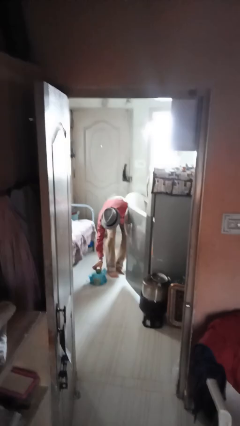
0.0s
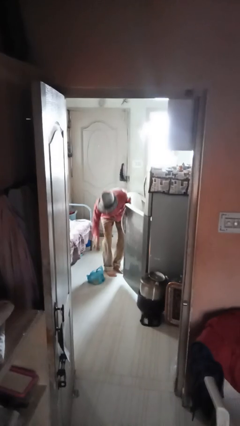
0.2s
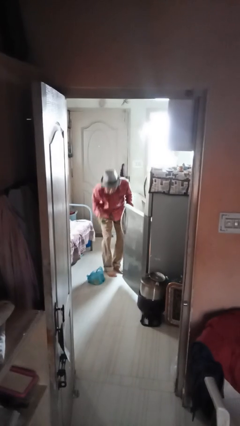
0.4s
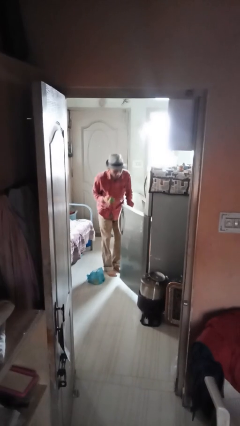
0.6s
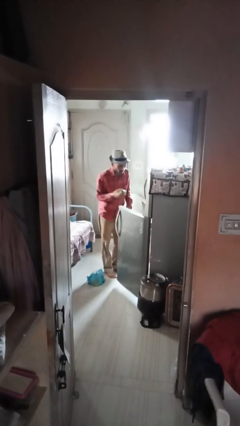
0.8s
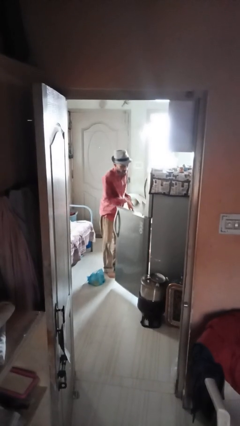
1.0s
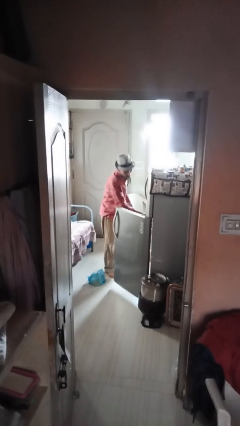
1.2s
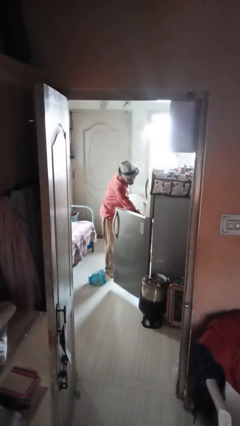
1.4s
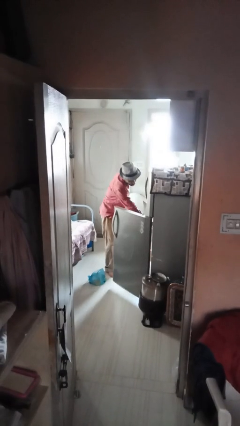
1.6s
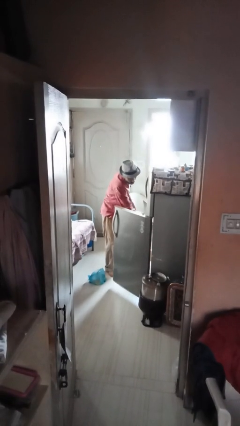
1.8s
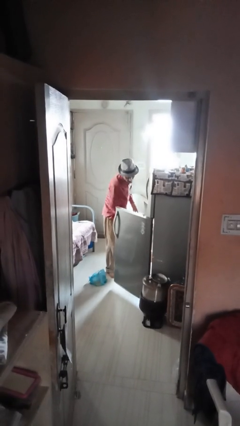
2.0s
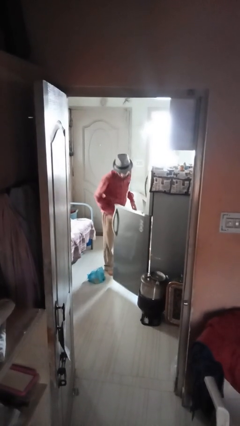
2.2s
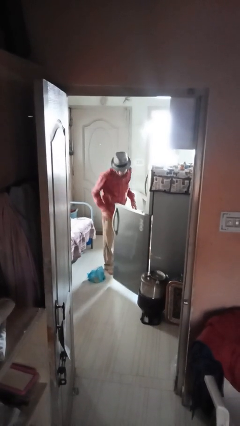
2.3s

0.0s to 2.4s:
person loads groceries into refrigerator

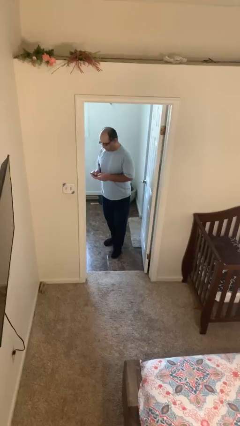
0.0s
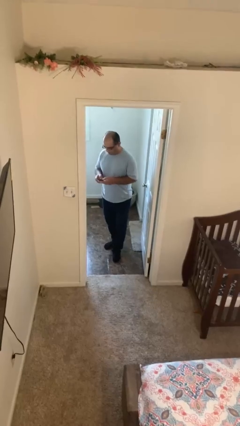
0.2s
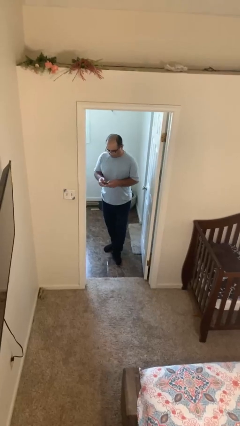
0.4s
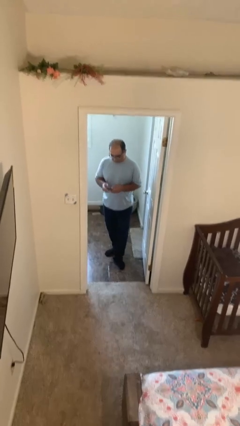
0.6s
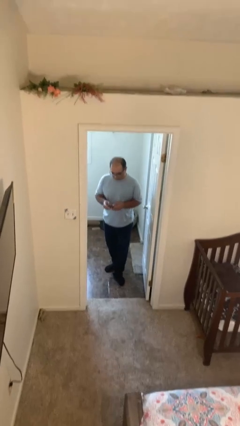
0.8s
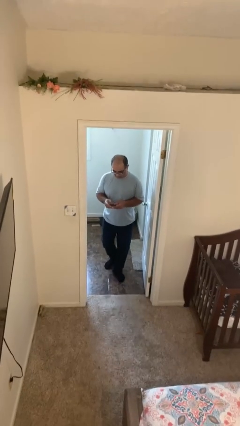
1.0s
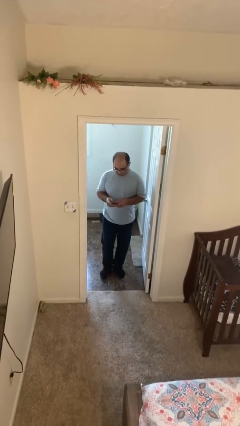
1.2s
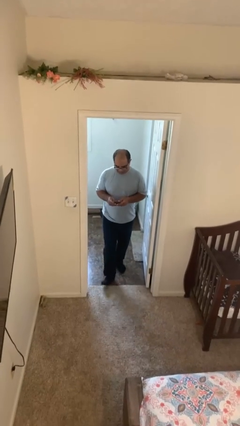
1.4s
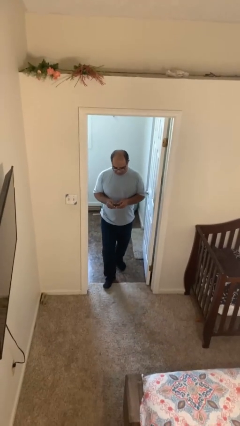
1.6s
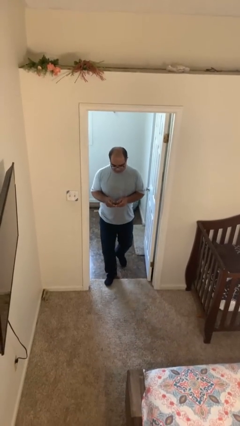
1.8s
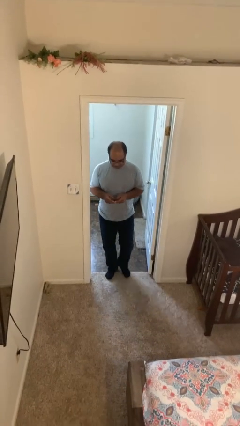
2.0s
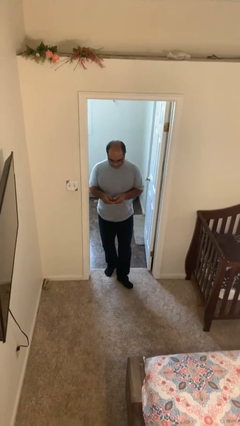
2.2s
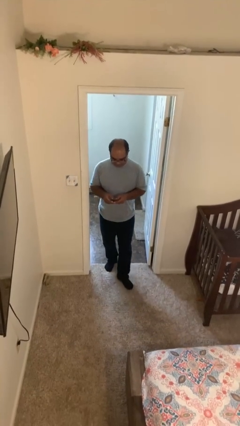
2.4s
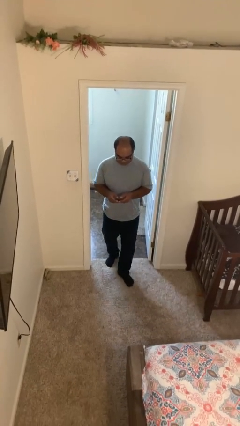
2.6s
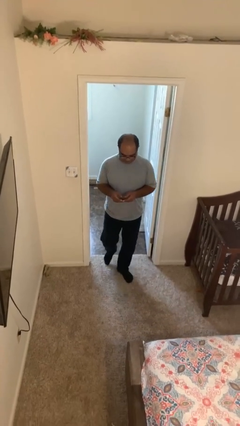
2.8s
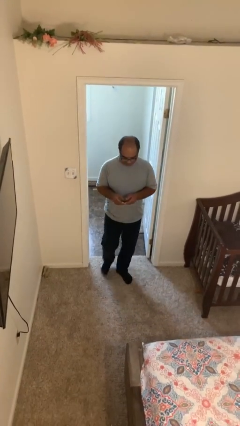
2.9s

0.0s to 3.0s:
person enters scene through structure

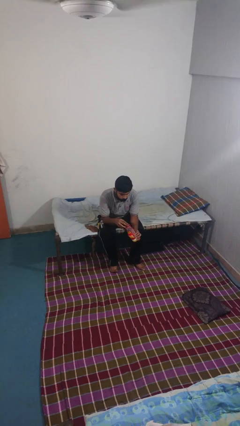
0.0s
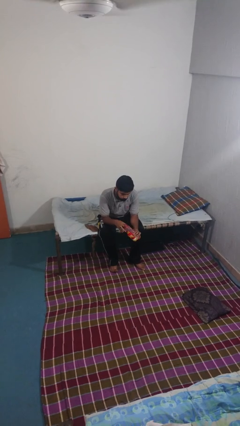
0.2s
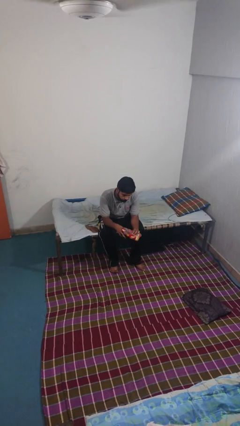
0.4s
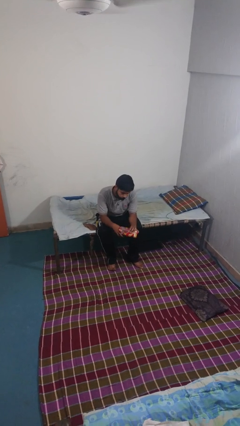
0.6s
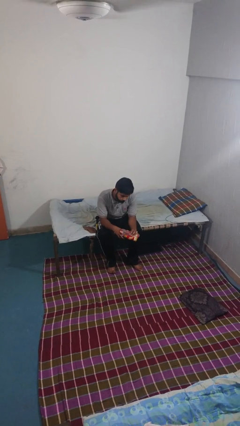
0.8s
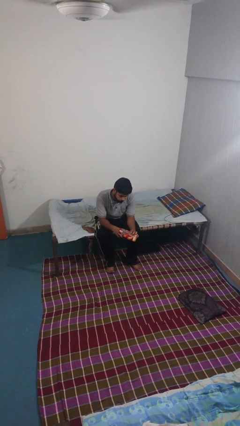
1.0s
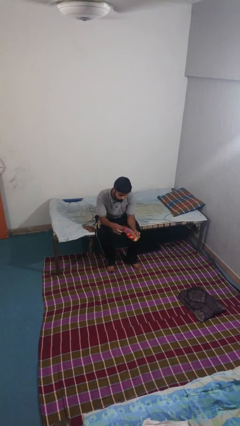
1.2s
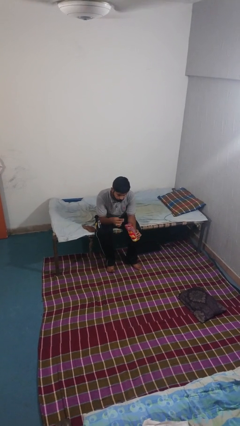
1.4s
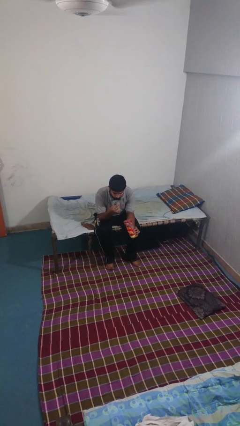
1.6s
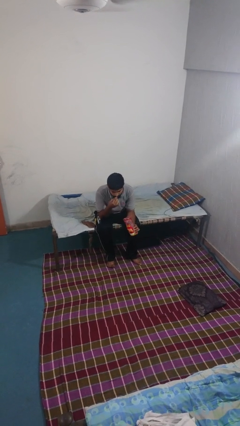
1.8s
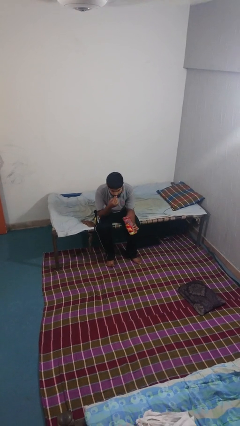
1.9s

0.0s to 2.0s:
person eats snack from bag

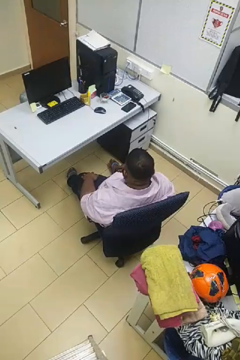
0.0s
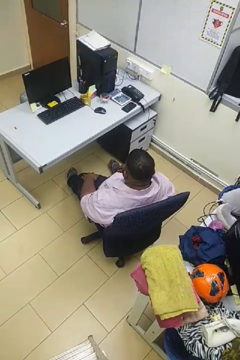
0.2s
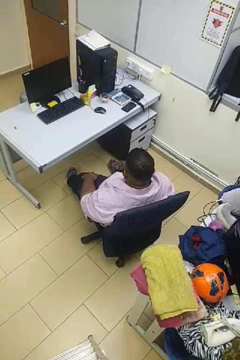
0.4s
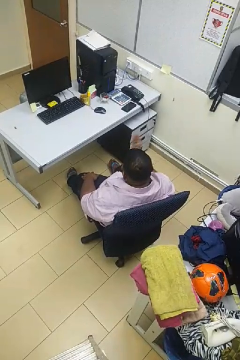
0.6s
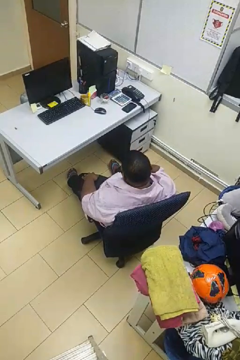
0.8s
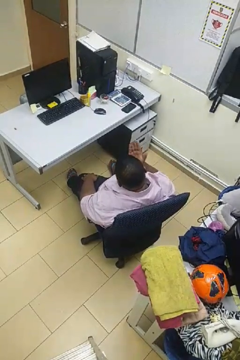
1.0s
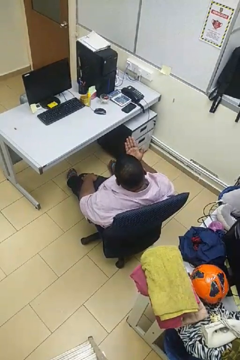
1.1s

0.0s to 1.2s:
person swats bug

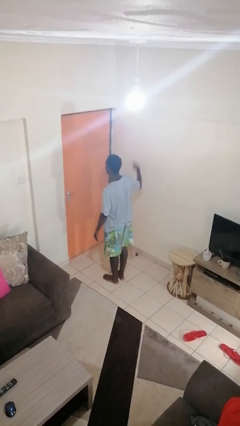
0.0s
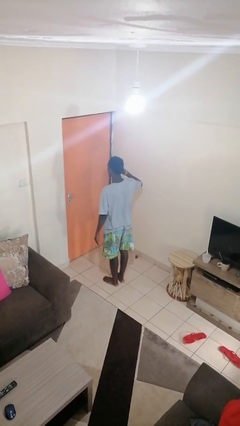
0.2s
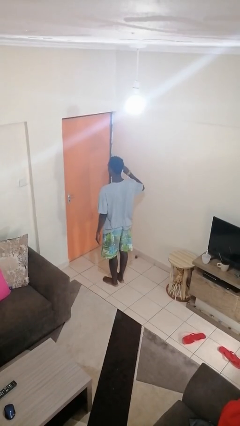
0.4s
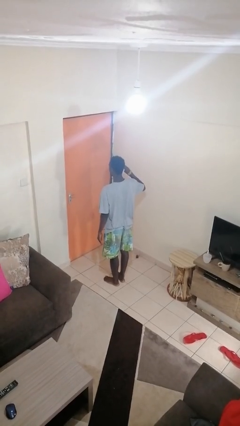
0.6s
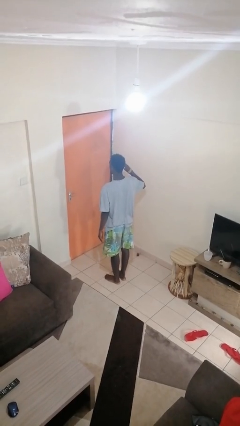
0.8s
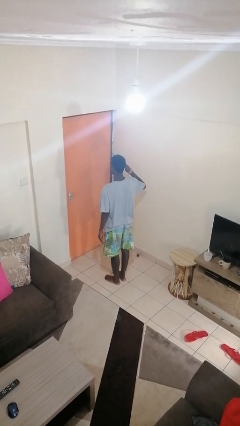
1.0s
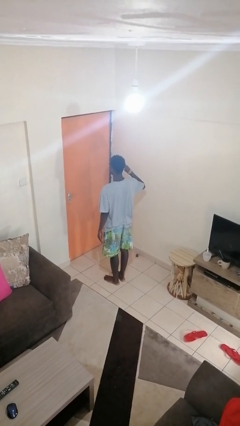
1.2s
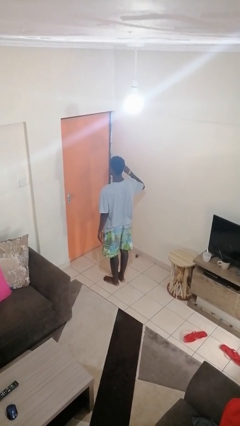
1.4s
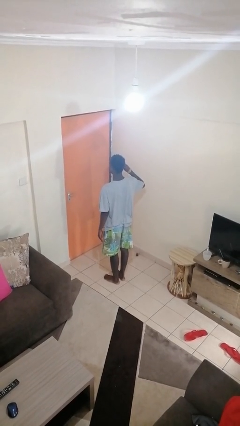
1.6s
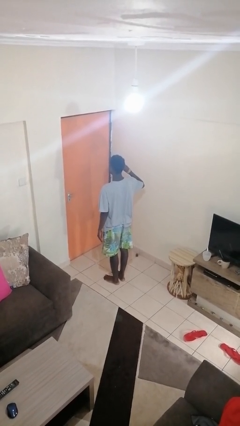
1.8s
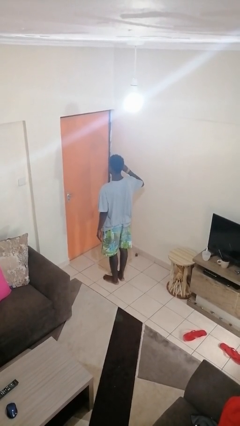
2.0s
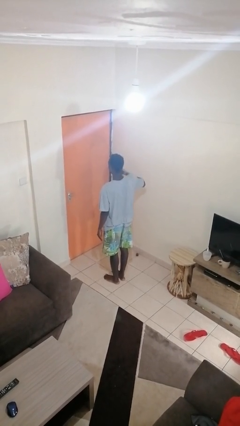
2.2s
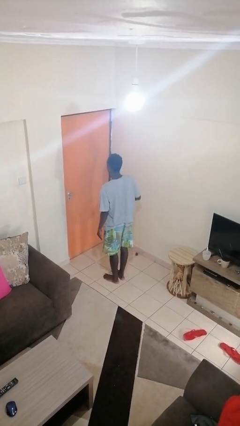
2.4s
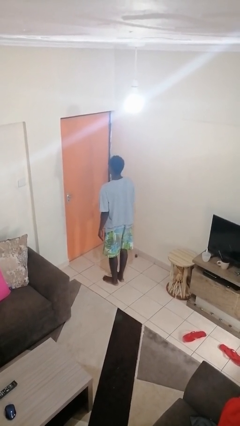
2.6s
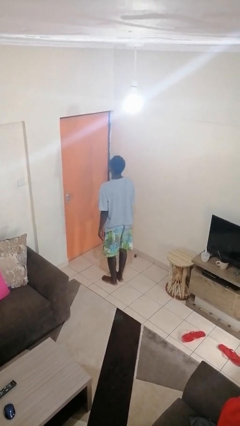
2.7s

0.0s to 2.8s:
person salutes

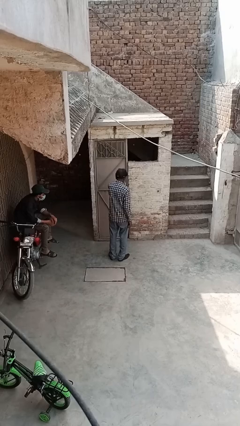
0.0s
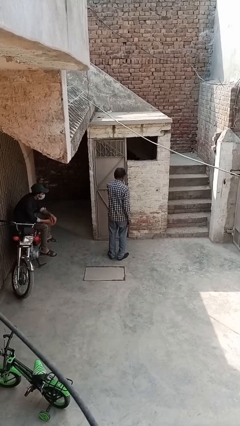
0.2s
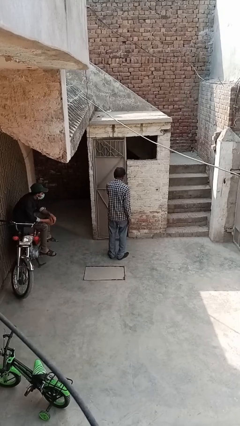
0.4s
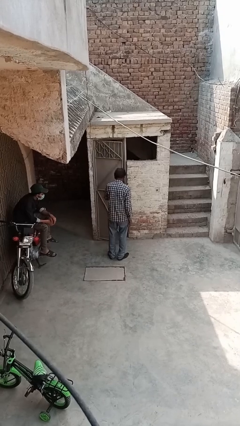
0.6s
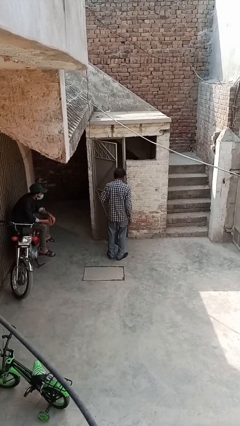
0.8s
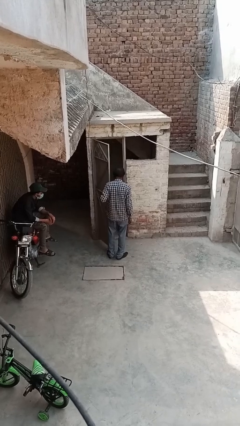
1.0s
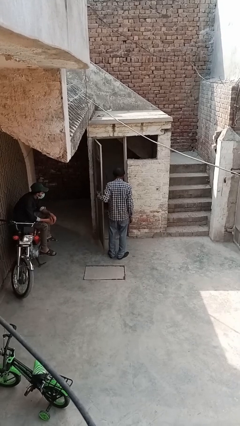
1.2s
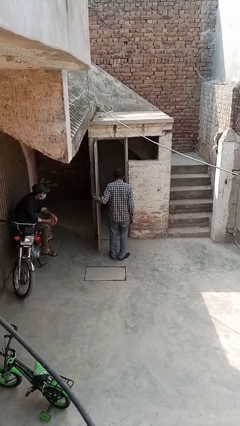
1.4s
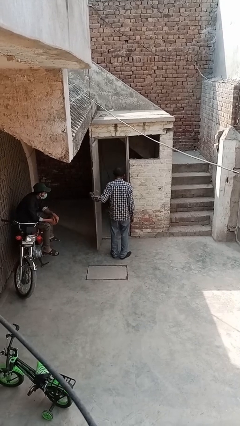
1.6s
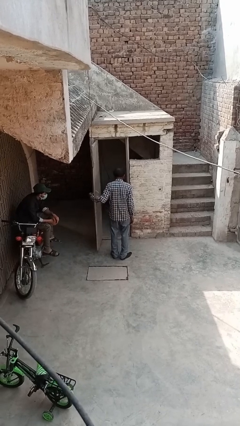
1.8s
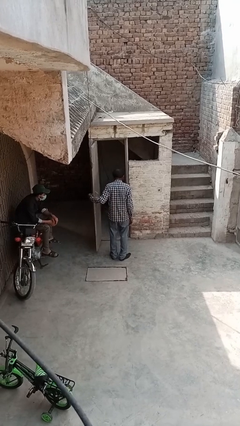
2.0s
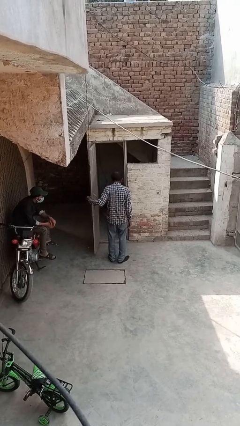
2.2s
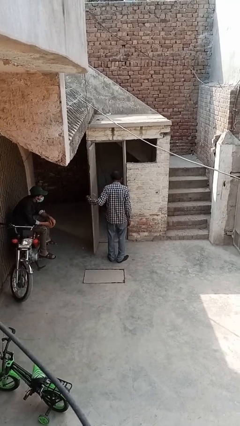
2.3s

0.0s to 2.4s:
person opens facility door

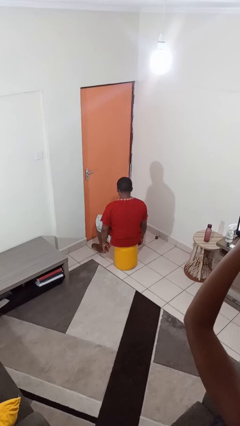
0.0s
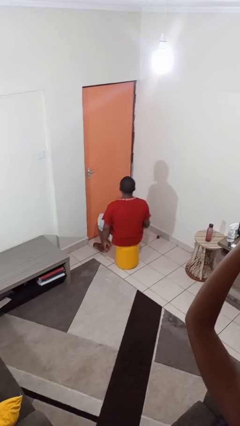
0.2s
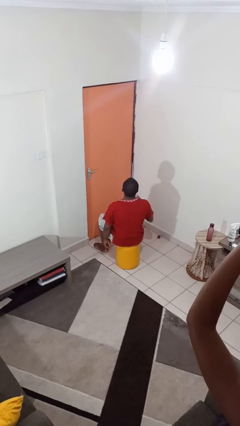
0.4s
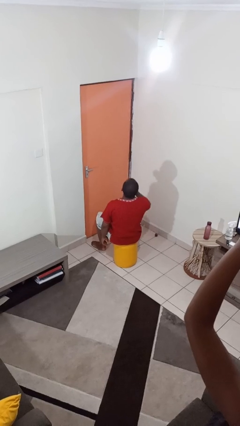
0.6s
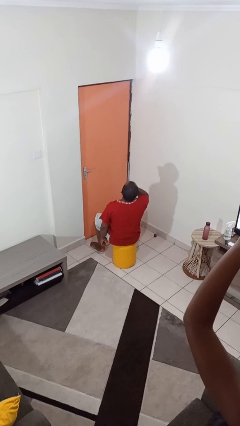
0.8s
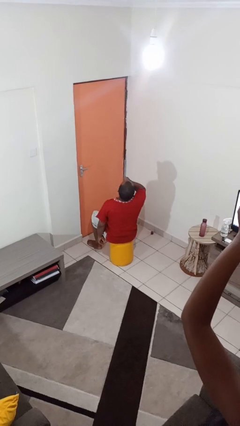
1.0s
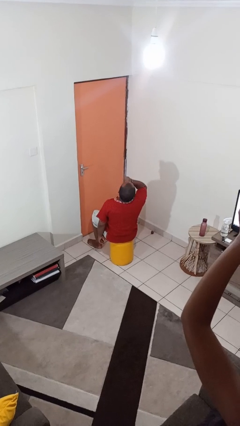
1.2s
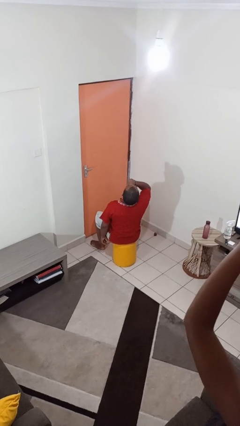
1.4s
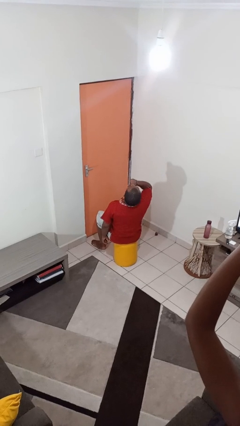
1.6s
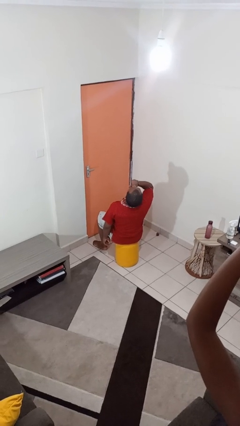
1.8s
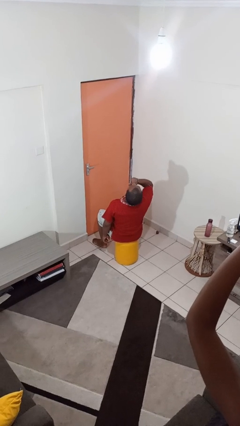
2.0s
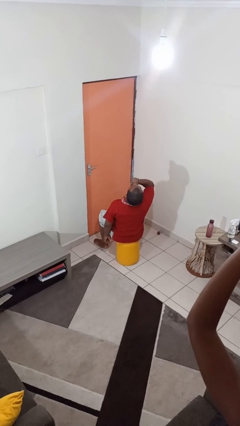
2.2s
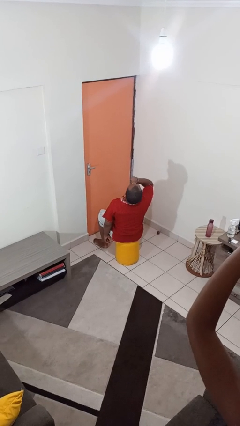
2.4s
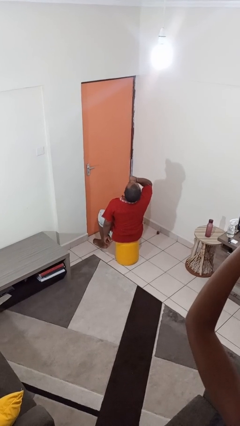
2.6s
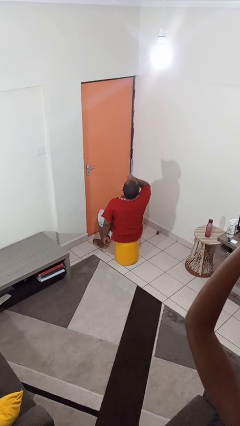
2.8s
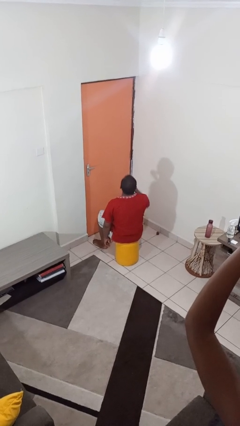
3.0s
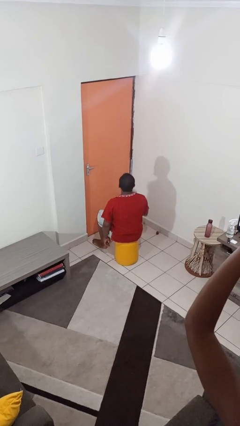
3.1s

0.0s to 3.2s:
person yawns

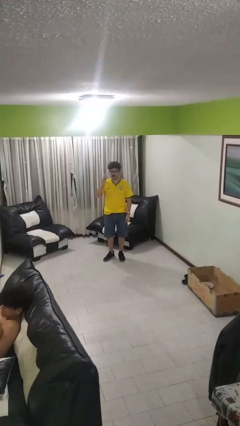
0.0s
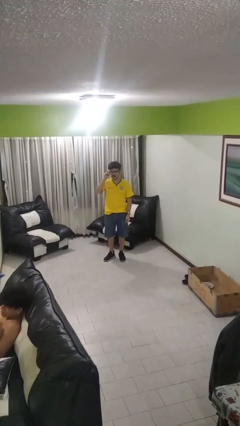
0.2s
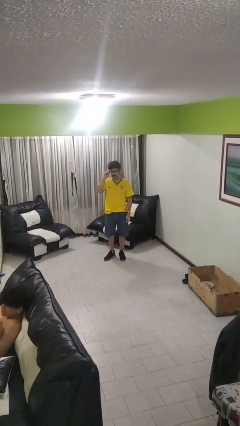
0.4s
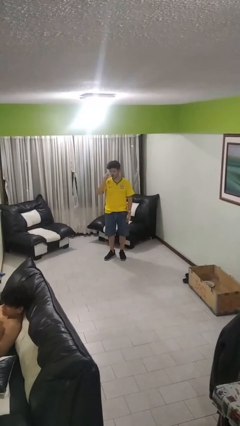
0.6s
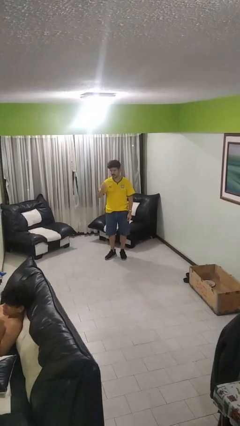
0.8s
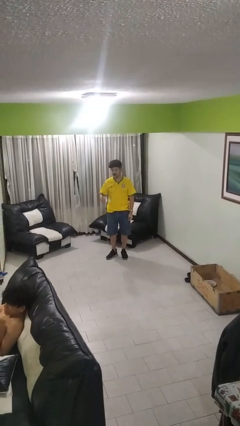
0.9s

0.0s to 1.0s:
person takes off glasses
